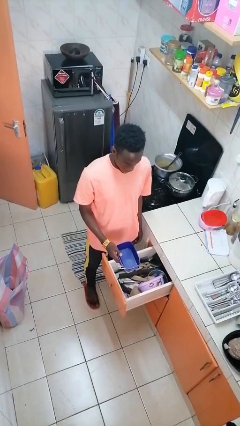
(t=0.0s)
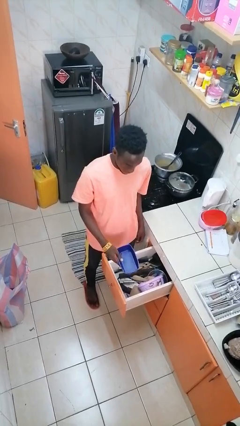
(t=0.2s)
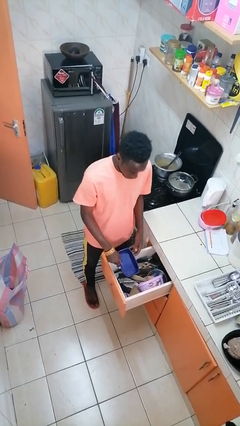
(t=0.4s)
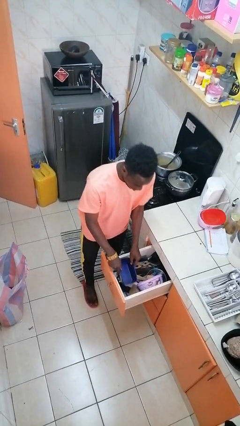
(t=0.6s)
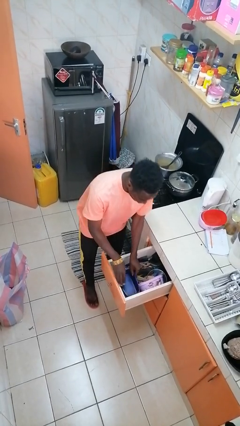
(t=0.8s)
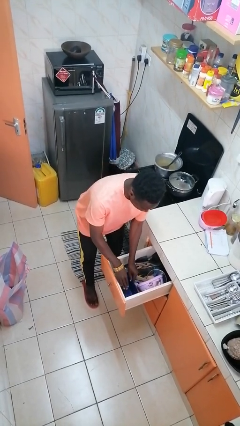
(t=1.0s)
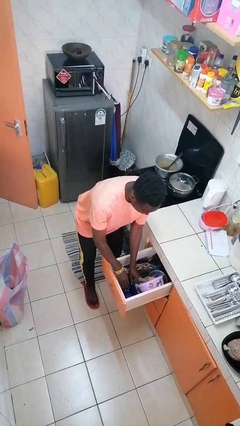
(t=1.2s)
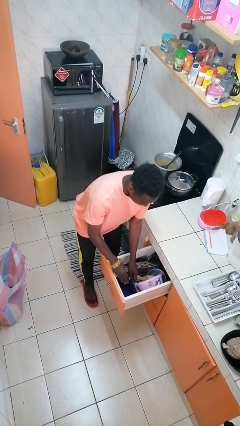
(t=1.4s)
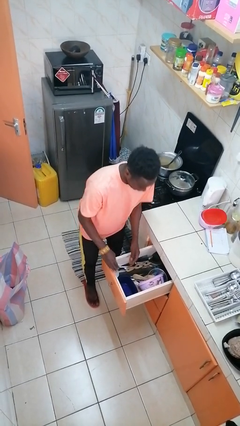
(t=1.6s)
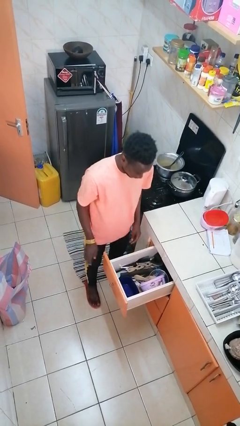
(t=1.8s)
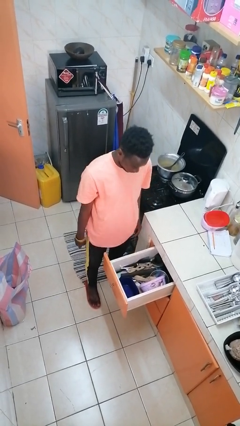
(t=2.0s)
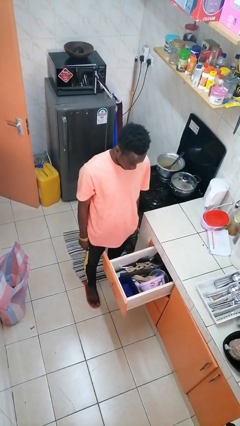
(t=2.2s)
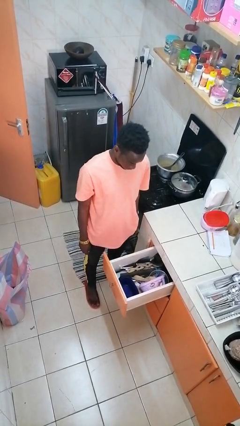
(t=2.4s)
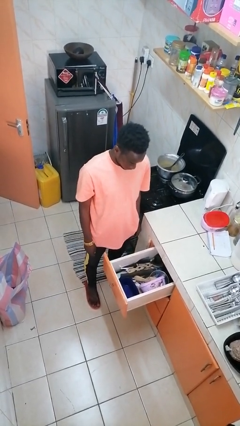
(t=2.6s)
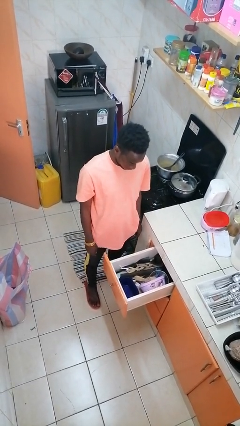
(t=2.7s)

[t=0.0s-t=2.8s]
person puts object into kitchen drawer

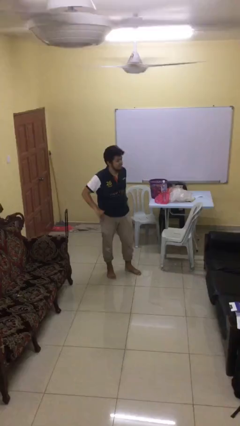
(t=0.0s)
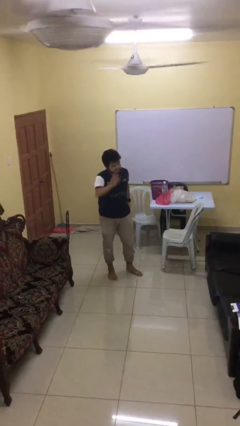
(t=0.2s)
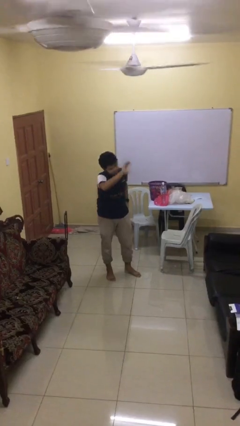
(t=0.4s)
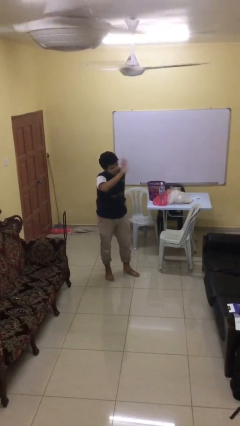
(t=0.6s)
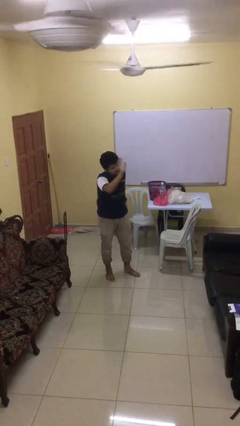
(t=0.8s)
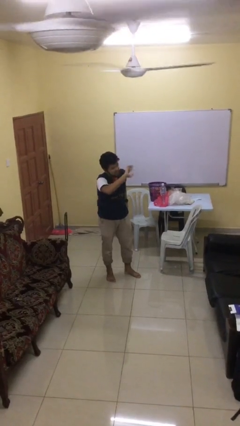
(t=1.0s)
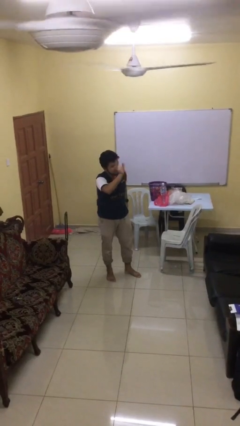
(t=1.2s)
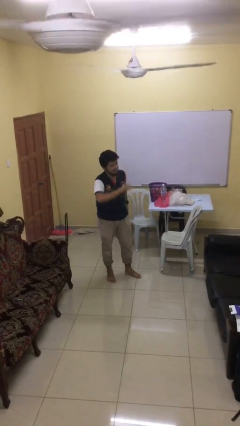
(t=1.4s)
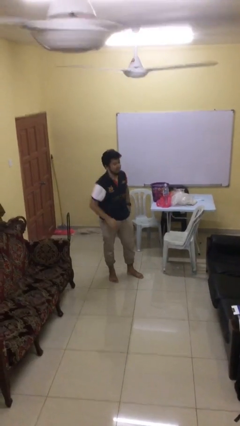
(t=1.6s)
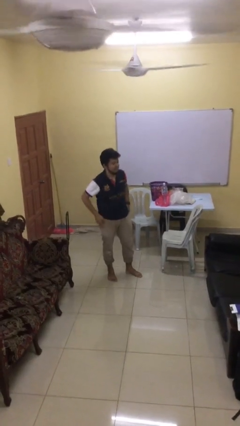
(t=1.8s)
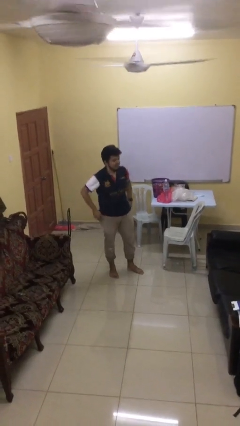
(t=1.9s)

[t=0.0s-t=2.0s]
person waves at person

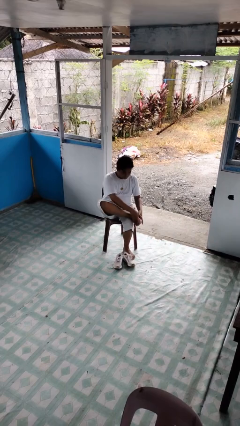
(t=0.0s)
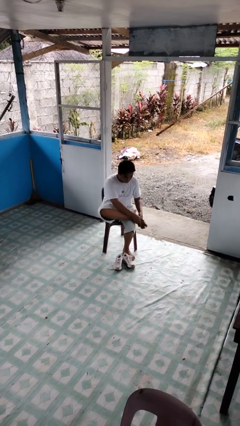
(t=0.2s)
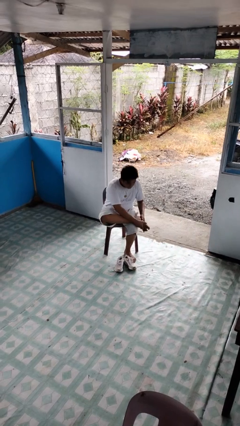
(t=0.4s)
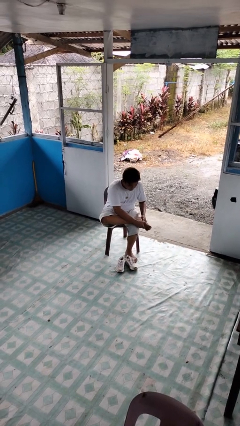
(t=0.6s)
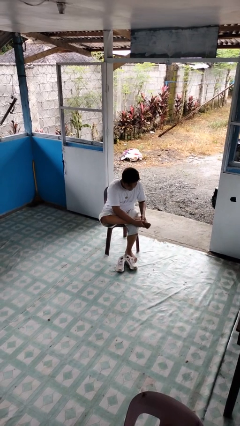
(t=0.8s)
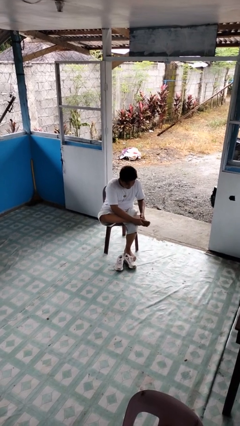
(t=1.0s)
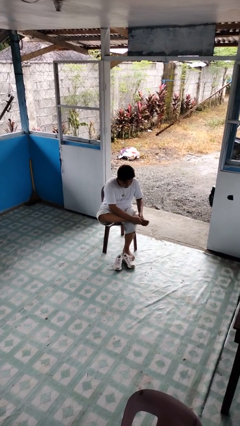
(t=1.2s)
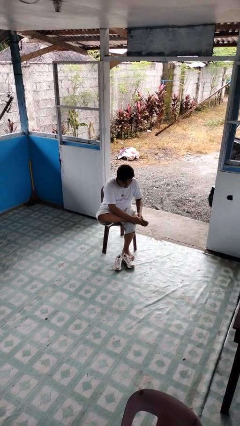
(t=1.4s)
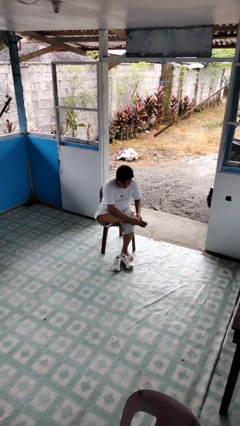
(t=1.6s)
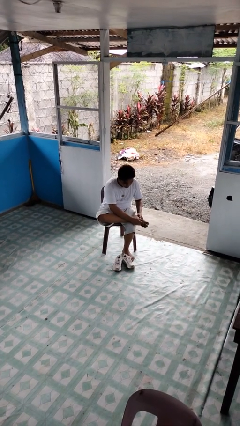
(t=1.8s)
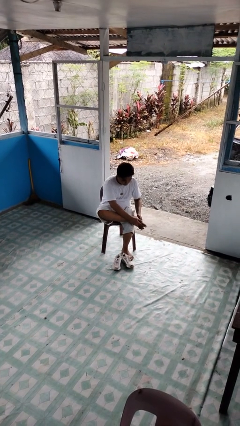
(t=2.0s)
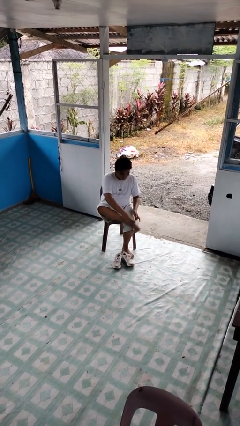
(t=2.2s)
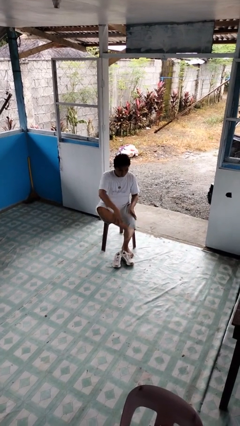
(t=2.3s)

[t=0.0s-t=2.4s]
person rubs foot

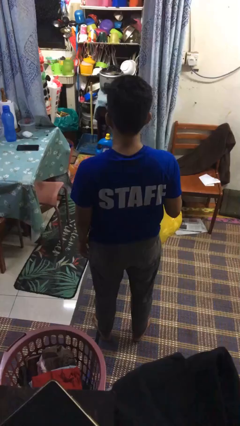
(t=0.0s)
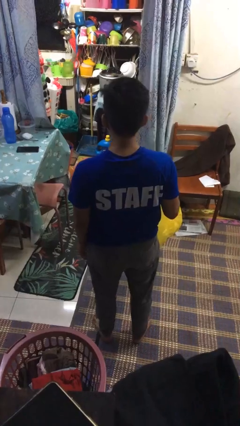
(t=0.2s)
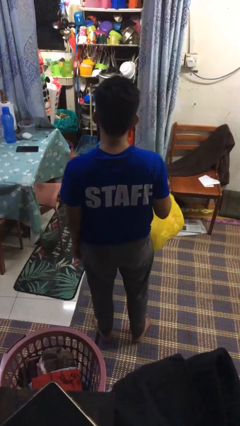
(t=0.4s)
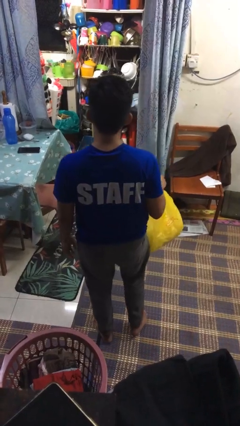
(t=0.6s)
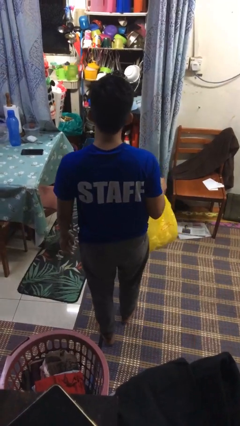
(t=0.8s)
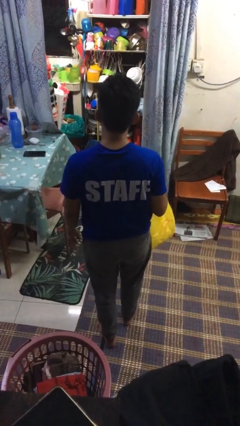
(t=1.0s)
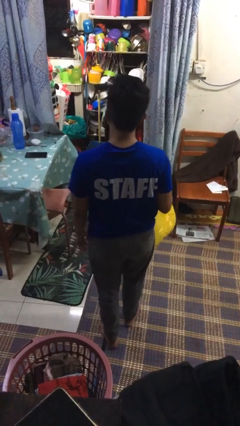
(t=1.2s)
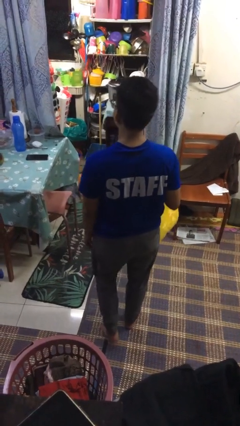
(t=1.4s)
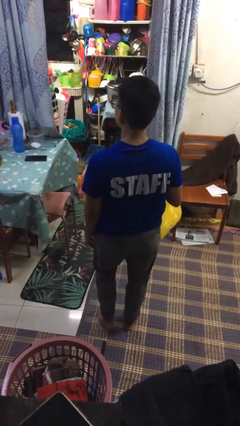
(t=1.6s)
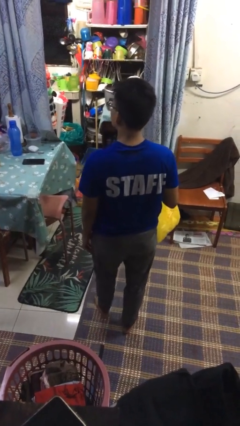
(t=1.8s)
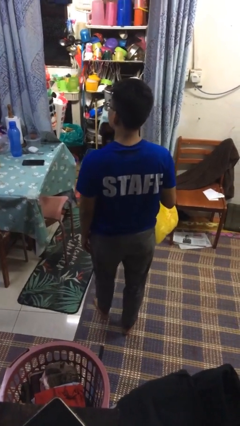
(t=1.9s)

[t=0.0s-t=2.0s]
person carries groceries

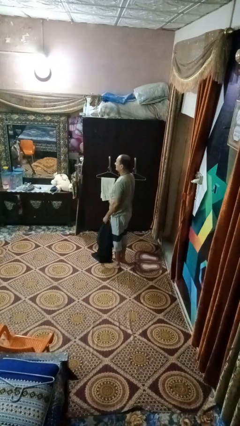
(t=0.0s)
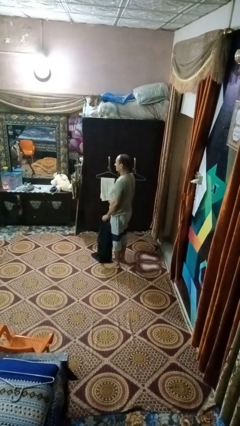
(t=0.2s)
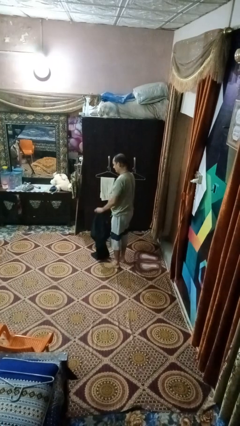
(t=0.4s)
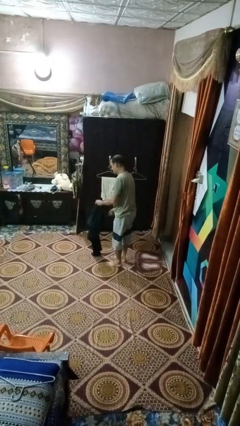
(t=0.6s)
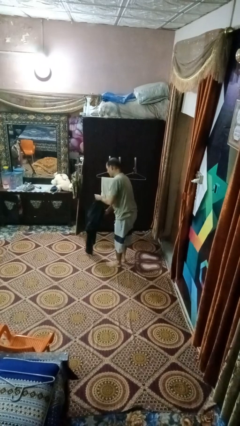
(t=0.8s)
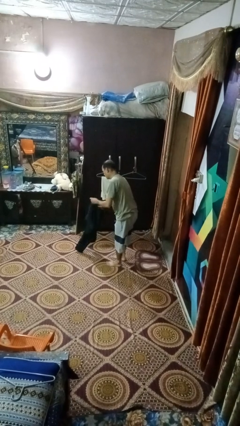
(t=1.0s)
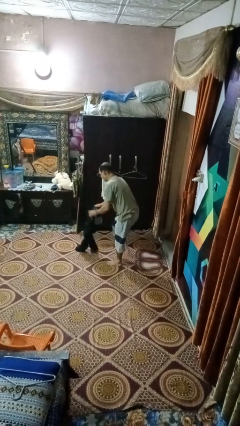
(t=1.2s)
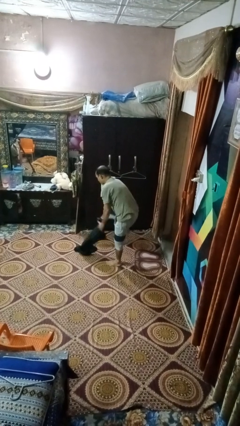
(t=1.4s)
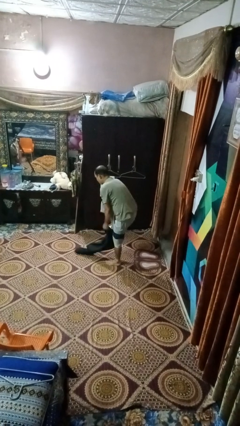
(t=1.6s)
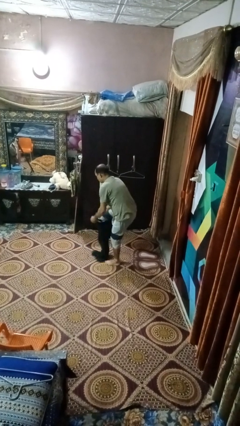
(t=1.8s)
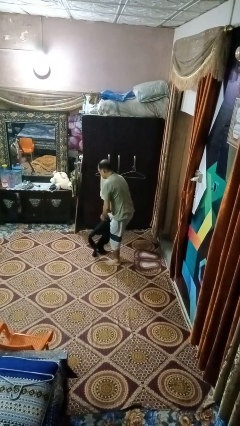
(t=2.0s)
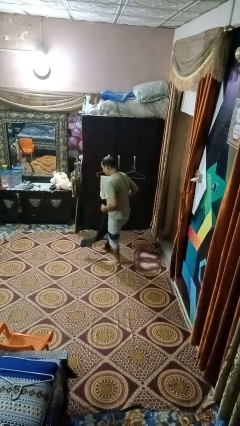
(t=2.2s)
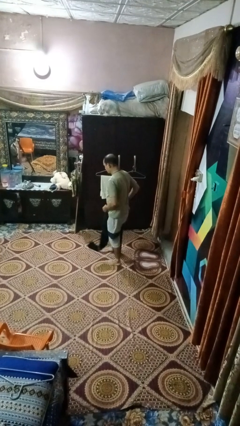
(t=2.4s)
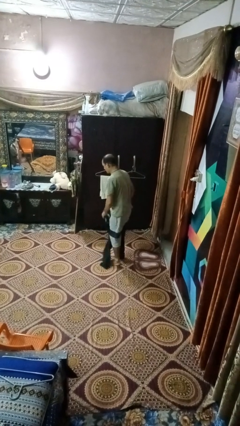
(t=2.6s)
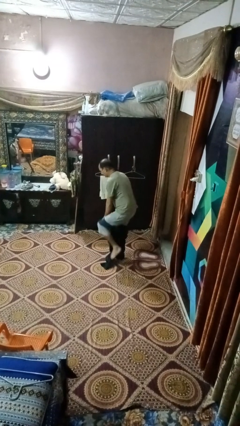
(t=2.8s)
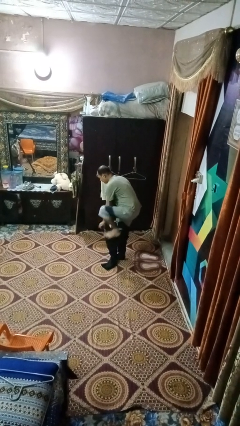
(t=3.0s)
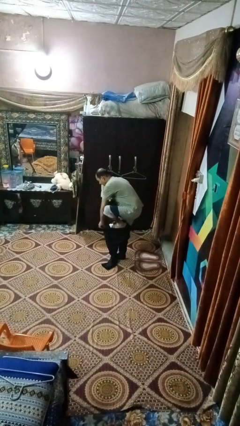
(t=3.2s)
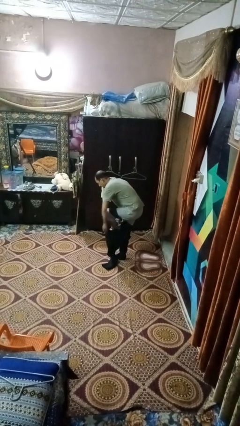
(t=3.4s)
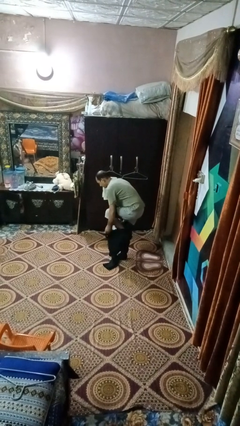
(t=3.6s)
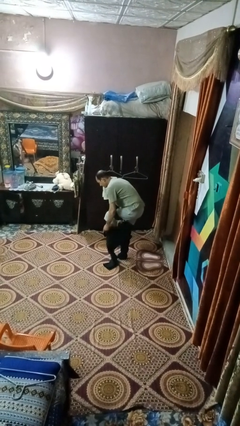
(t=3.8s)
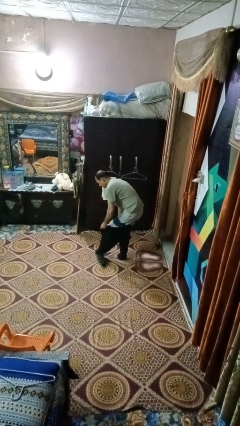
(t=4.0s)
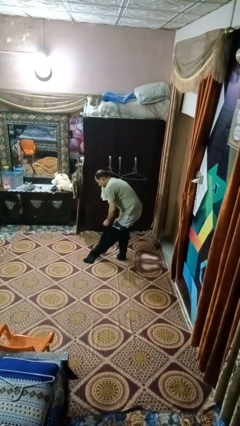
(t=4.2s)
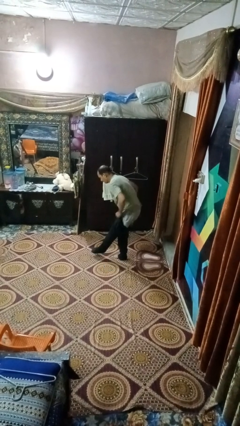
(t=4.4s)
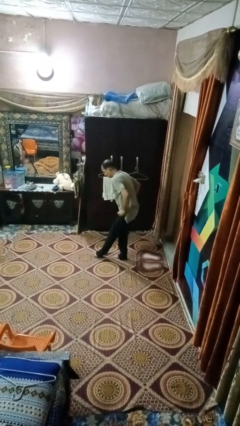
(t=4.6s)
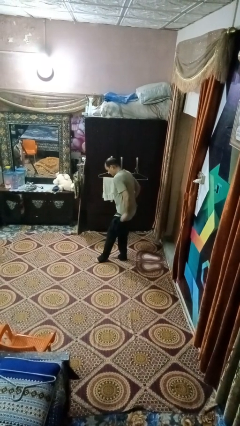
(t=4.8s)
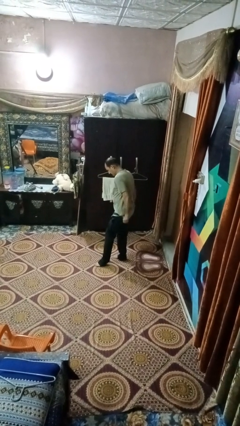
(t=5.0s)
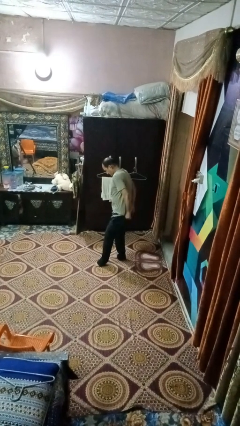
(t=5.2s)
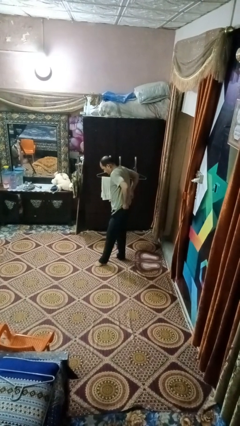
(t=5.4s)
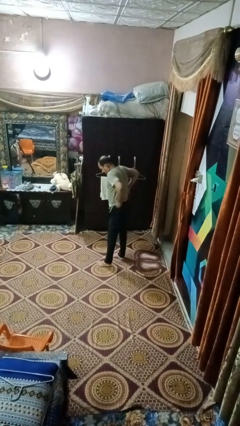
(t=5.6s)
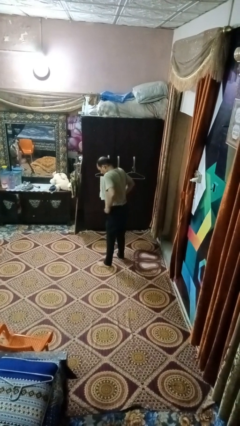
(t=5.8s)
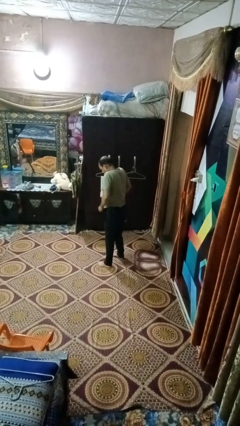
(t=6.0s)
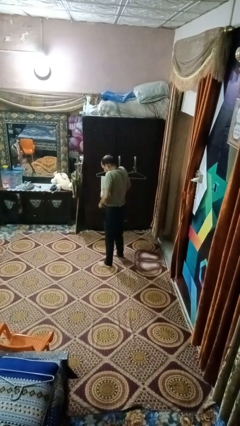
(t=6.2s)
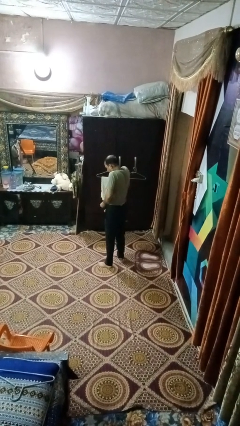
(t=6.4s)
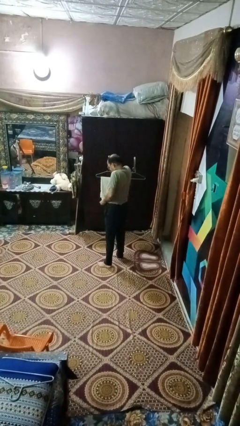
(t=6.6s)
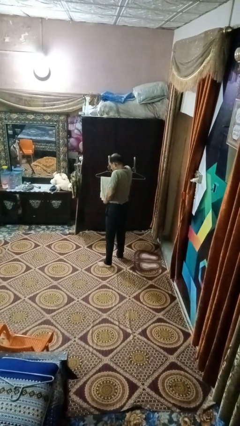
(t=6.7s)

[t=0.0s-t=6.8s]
person puts on pants

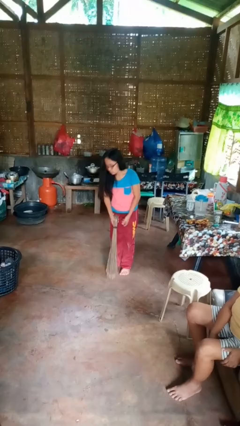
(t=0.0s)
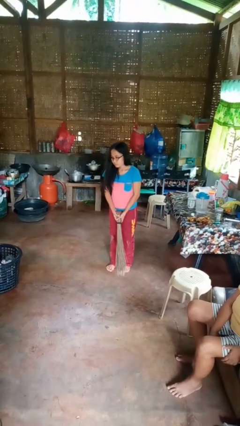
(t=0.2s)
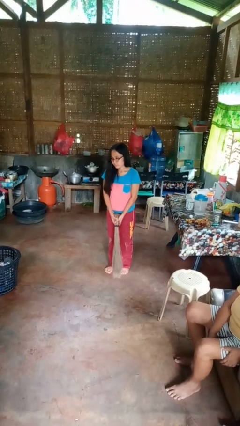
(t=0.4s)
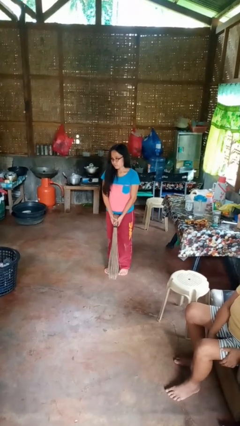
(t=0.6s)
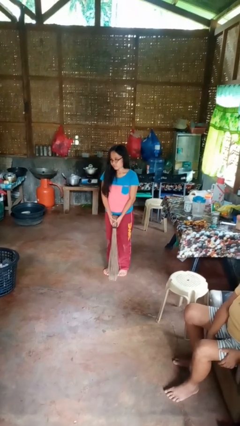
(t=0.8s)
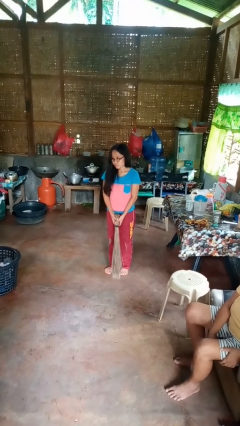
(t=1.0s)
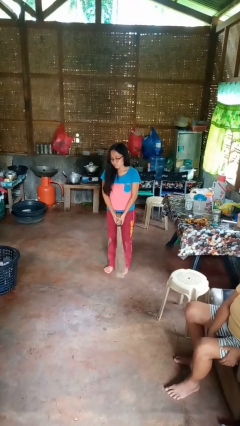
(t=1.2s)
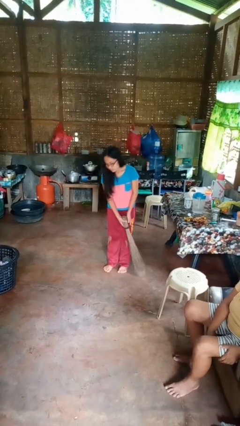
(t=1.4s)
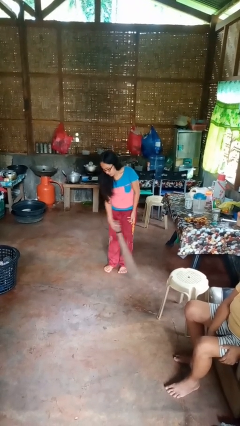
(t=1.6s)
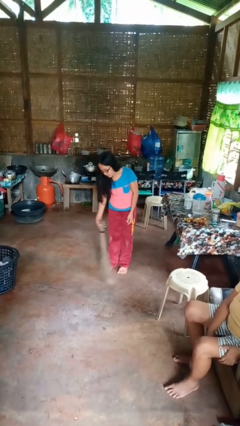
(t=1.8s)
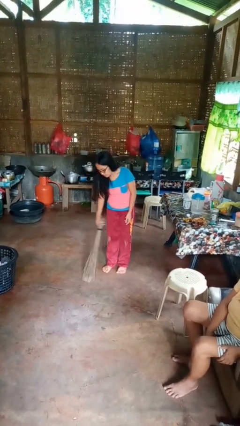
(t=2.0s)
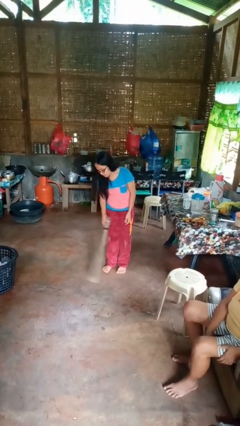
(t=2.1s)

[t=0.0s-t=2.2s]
person sweeps floor
